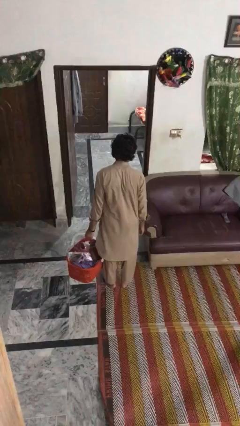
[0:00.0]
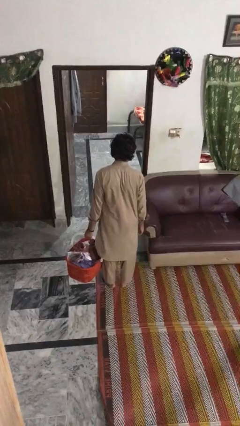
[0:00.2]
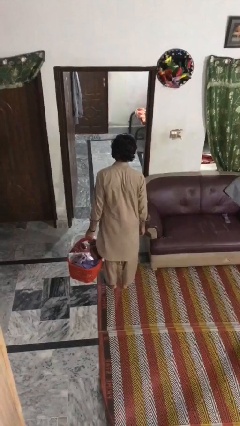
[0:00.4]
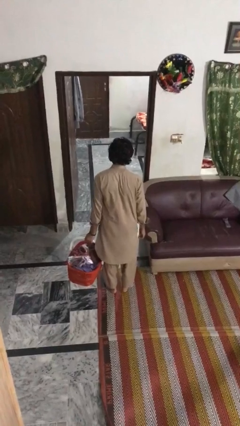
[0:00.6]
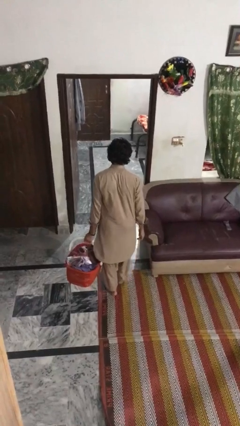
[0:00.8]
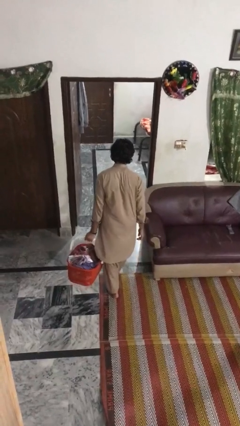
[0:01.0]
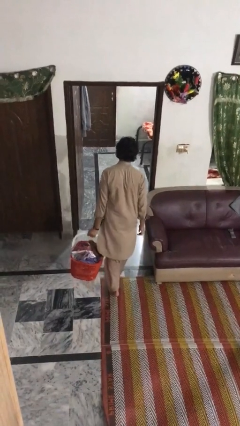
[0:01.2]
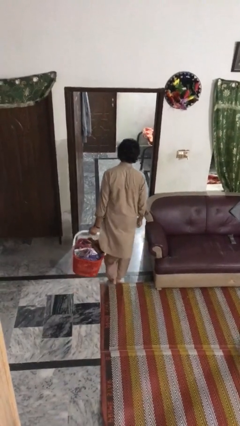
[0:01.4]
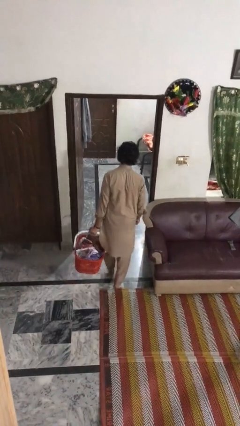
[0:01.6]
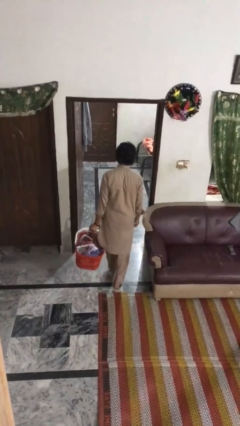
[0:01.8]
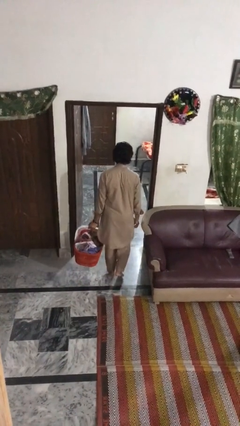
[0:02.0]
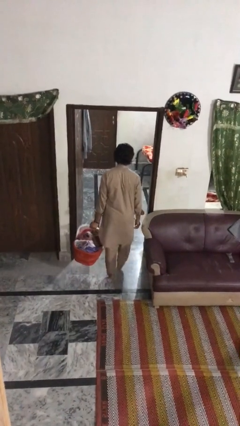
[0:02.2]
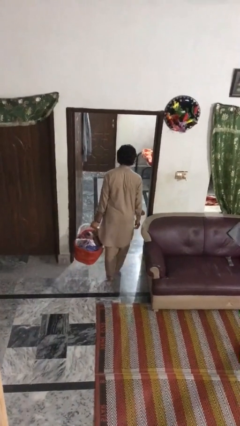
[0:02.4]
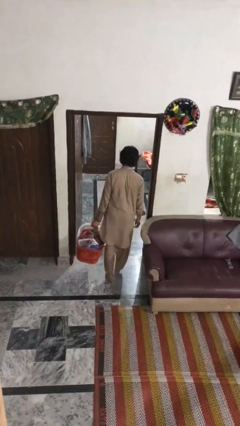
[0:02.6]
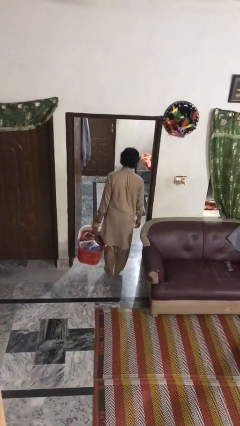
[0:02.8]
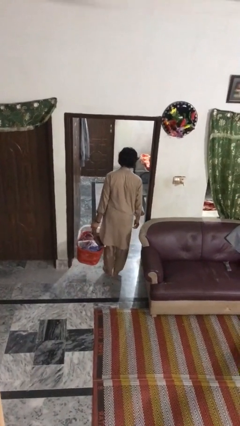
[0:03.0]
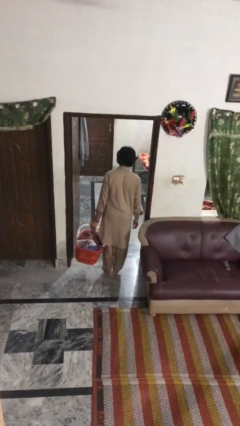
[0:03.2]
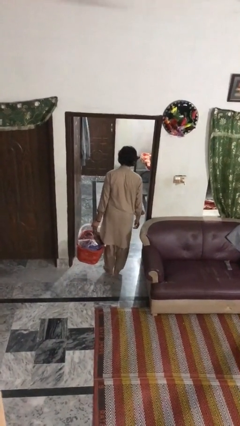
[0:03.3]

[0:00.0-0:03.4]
person carries laundry basket

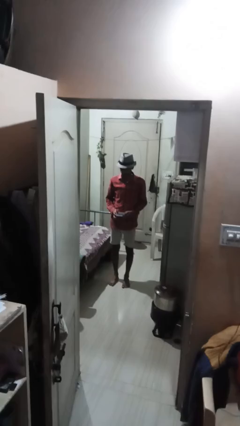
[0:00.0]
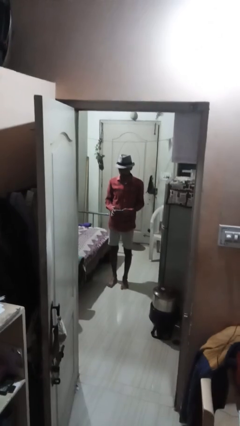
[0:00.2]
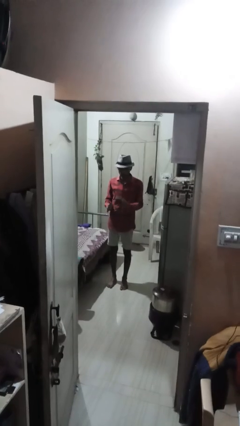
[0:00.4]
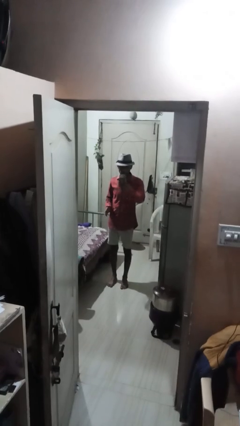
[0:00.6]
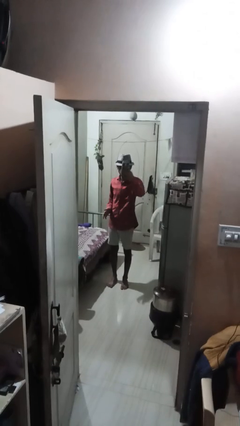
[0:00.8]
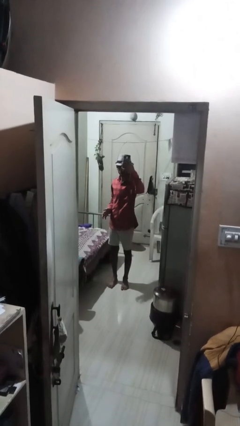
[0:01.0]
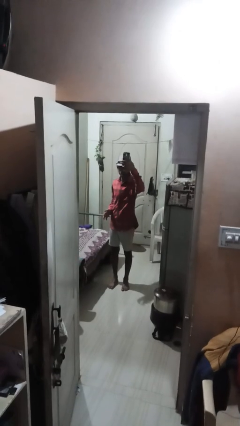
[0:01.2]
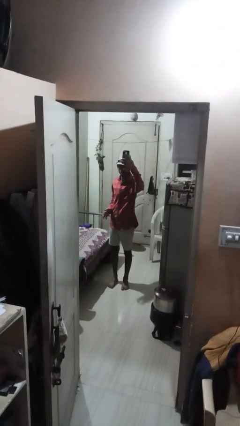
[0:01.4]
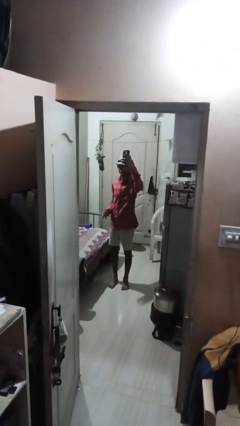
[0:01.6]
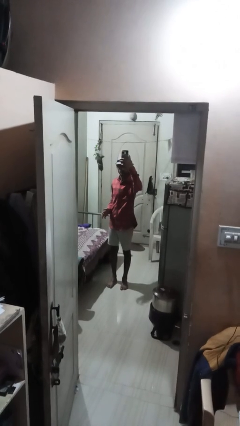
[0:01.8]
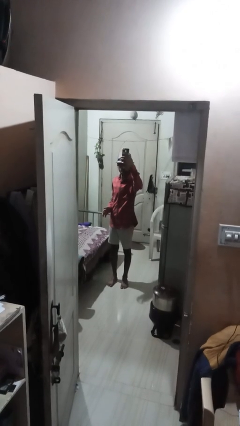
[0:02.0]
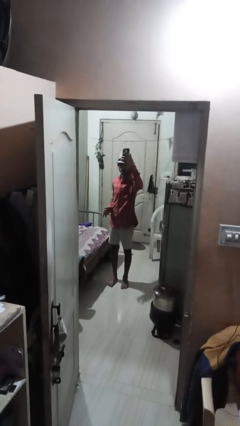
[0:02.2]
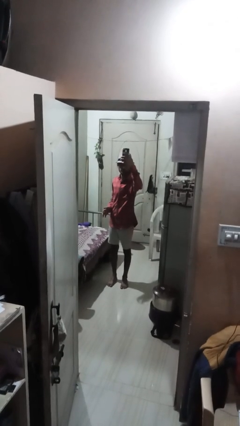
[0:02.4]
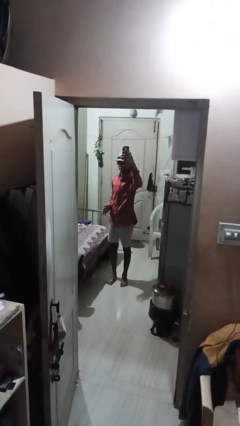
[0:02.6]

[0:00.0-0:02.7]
person takes selfie

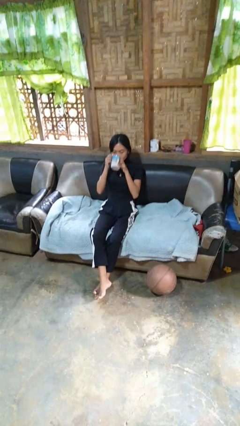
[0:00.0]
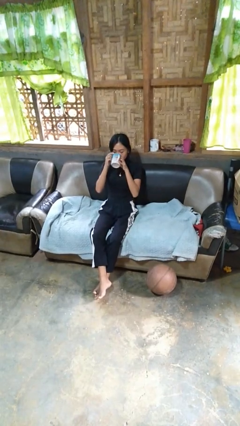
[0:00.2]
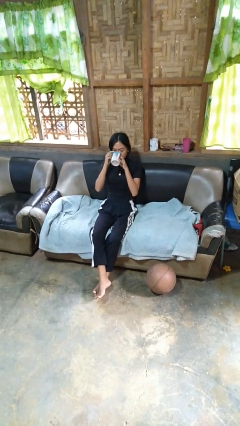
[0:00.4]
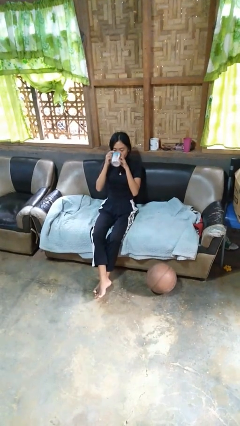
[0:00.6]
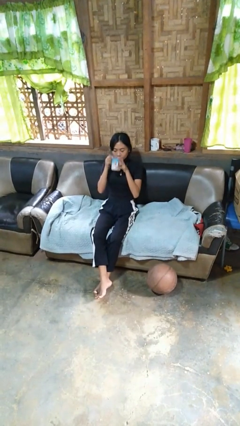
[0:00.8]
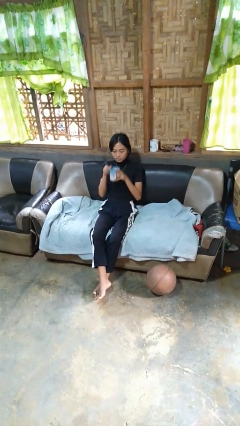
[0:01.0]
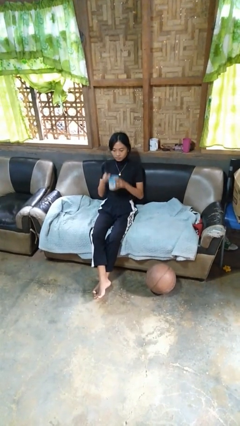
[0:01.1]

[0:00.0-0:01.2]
person drinks from mug

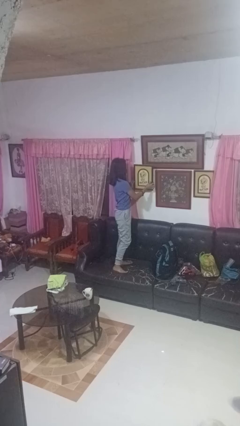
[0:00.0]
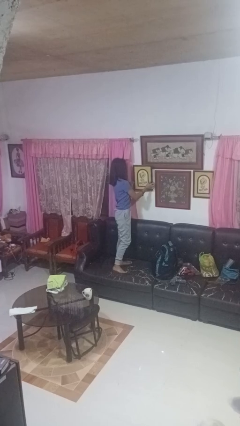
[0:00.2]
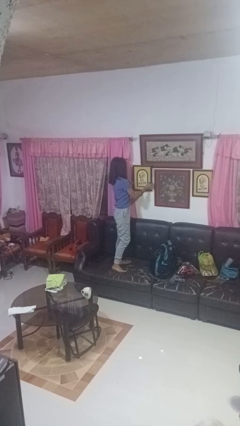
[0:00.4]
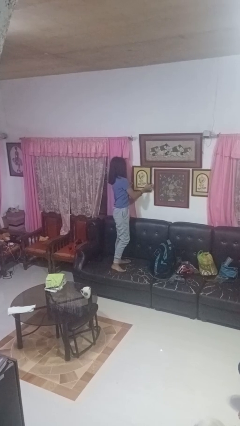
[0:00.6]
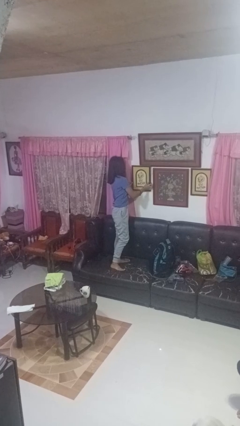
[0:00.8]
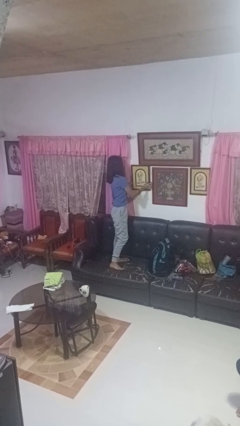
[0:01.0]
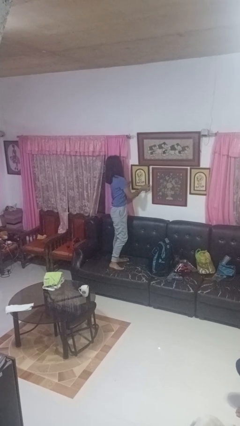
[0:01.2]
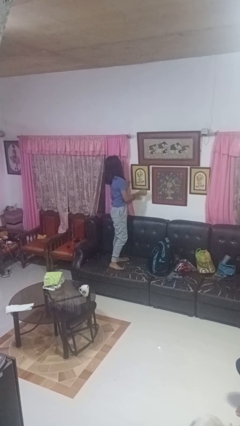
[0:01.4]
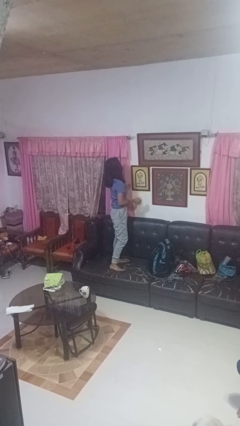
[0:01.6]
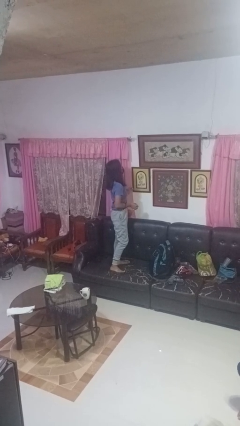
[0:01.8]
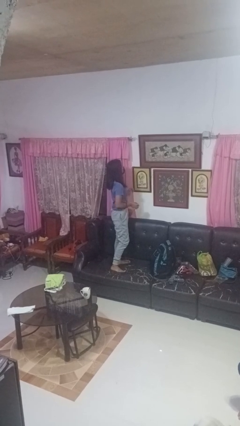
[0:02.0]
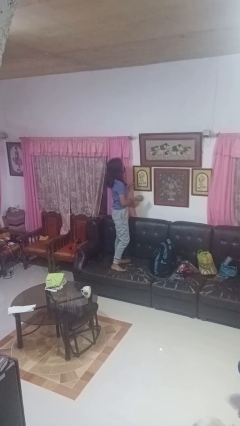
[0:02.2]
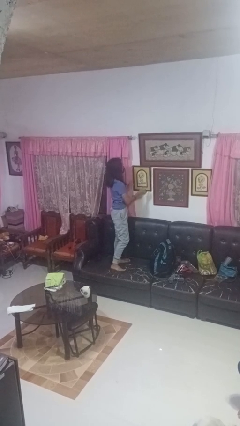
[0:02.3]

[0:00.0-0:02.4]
person puts up picture frame

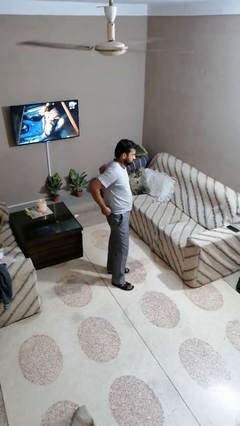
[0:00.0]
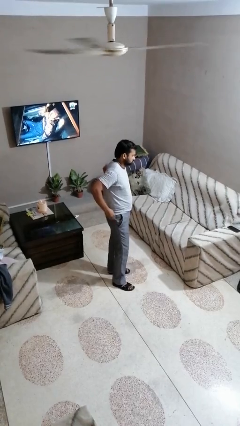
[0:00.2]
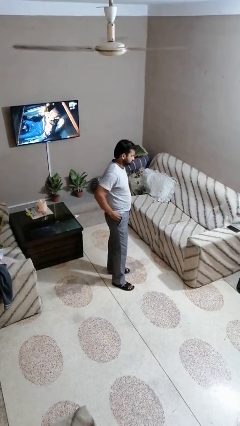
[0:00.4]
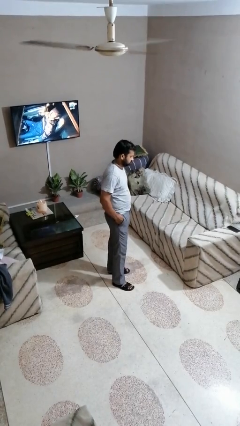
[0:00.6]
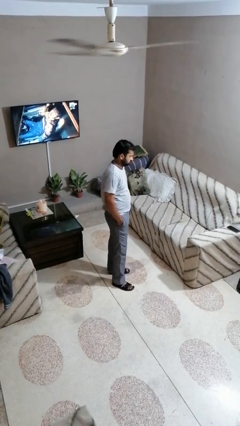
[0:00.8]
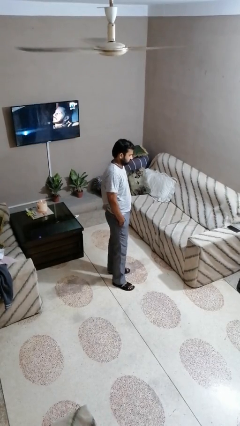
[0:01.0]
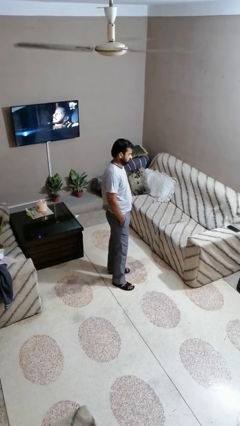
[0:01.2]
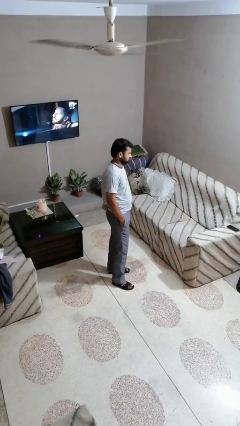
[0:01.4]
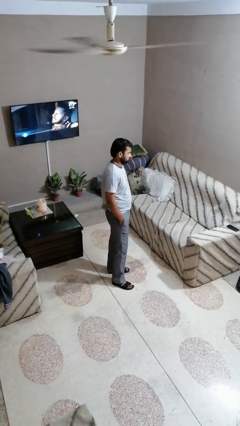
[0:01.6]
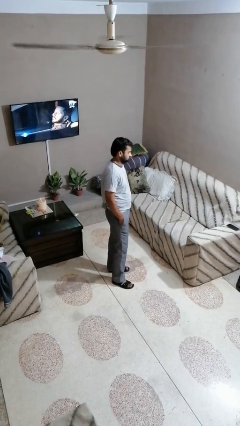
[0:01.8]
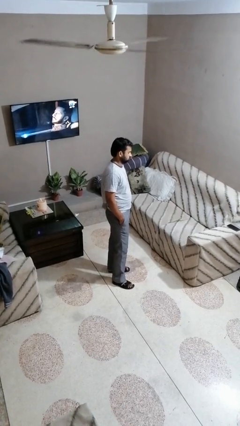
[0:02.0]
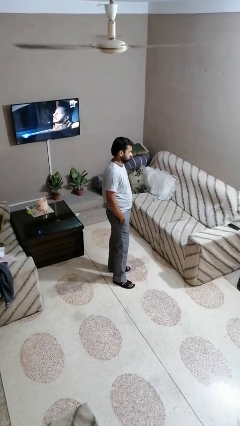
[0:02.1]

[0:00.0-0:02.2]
person puts hands in back pockets

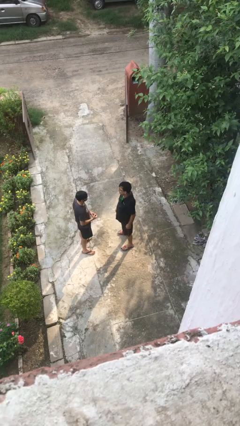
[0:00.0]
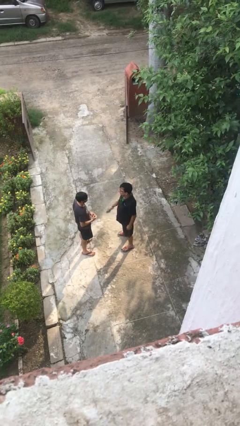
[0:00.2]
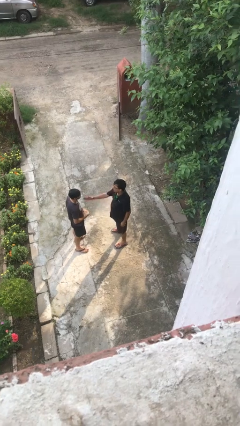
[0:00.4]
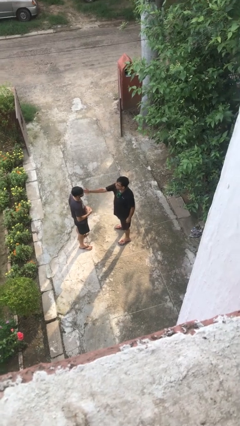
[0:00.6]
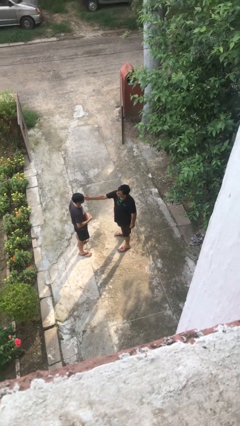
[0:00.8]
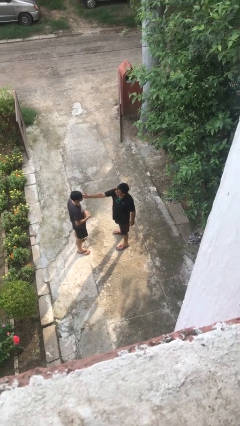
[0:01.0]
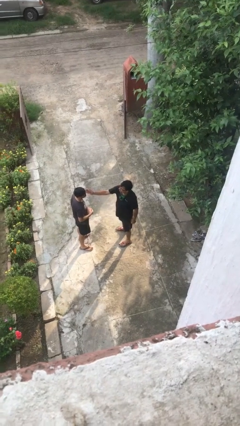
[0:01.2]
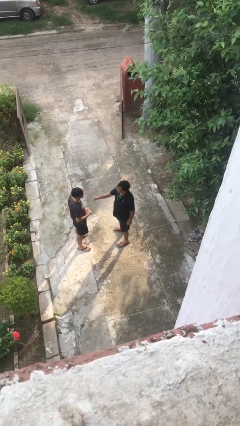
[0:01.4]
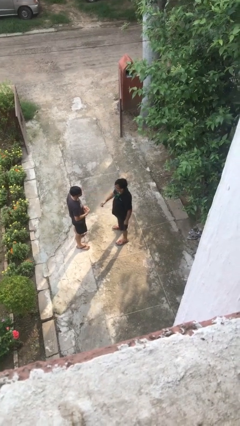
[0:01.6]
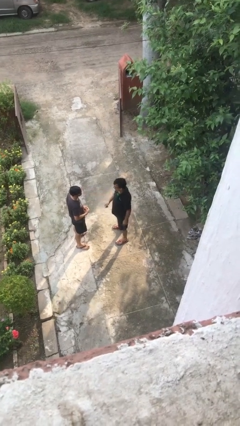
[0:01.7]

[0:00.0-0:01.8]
person touches face of person

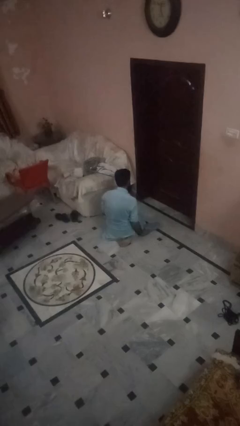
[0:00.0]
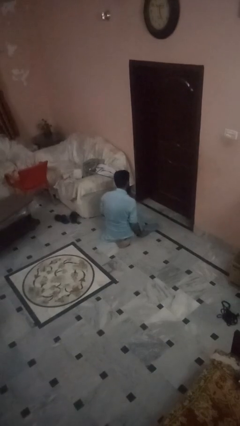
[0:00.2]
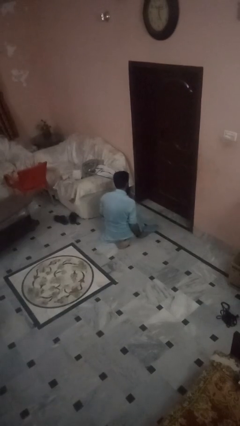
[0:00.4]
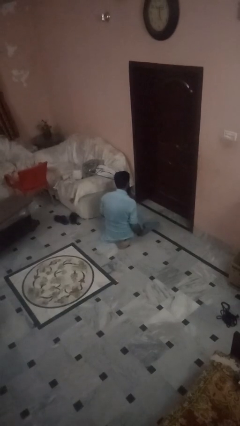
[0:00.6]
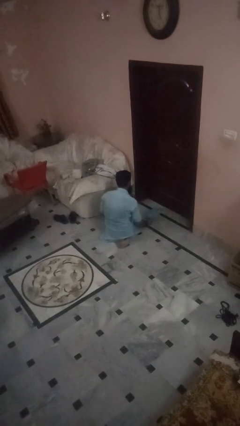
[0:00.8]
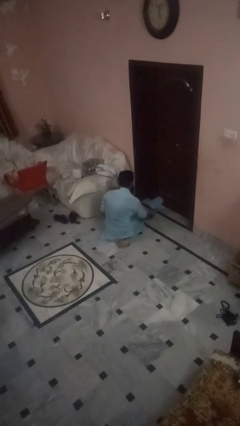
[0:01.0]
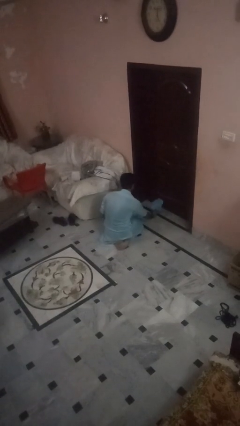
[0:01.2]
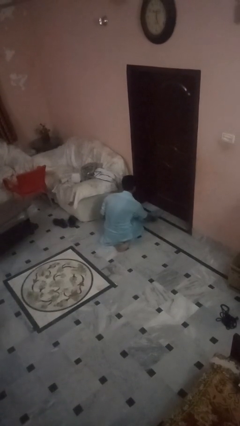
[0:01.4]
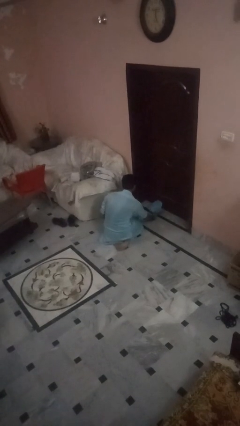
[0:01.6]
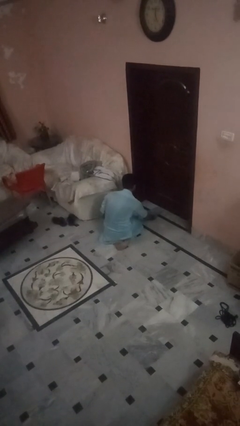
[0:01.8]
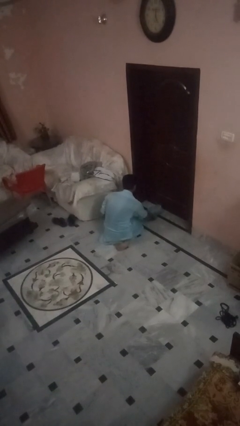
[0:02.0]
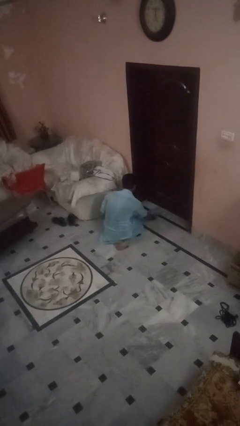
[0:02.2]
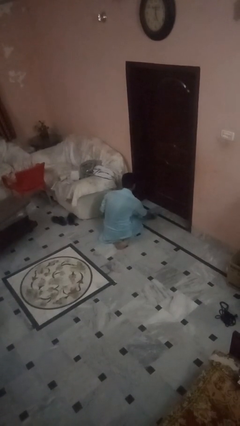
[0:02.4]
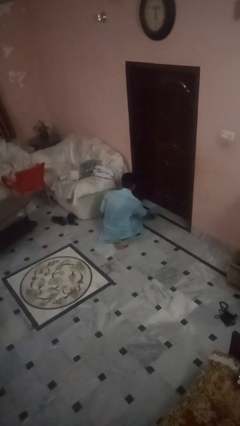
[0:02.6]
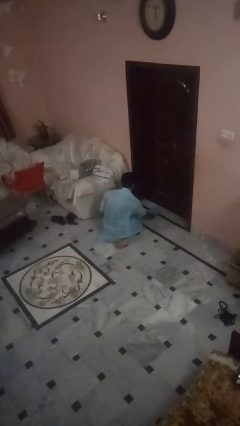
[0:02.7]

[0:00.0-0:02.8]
person swats bug

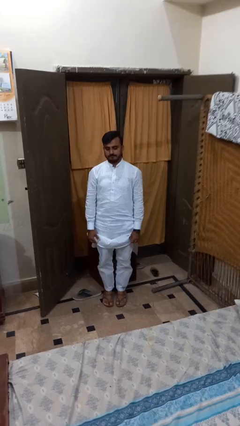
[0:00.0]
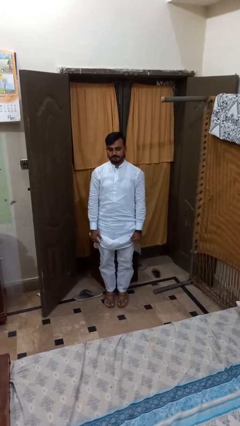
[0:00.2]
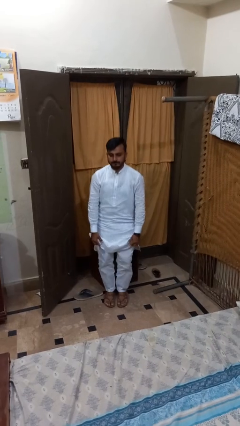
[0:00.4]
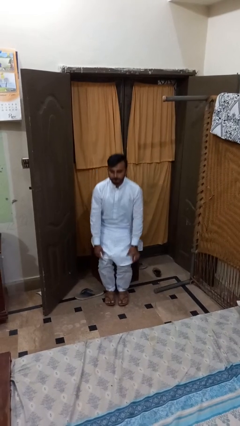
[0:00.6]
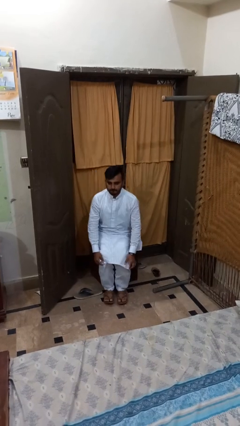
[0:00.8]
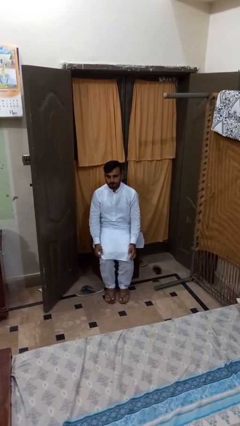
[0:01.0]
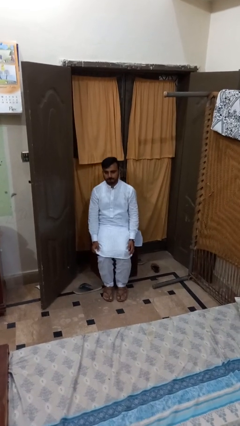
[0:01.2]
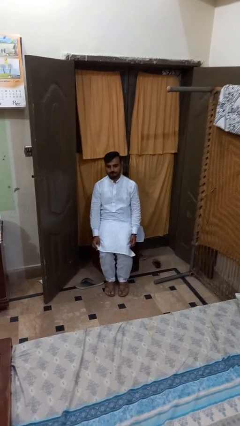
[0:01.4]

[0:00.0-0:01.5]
person sits down
